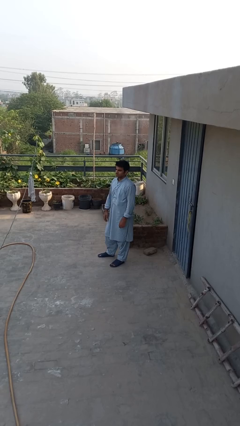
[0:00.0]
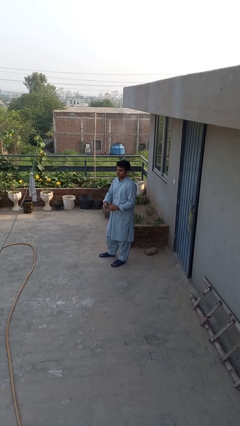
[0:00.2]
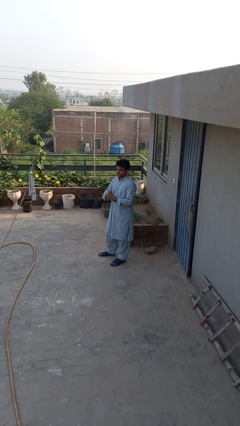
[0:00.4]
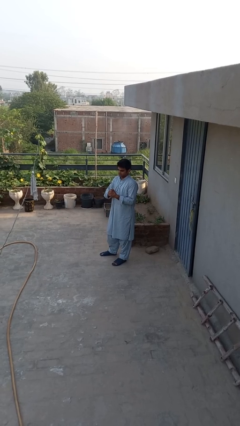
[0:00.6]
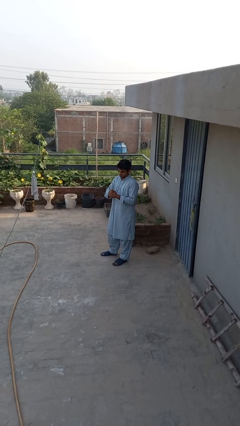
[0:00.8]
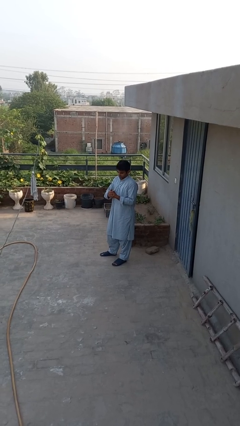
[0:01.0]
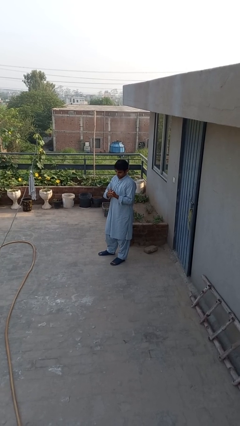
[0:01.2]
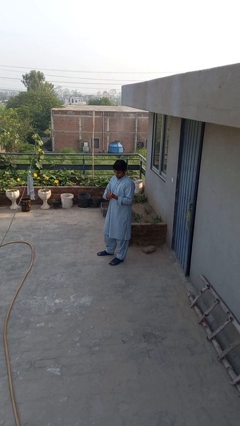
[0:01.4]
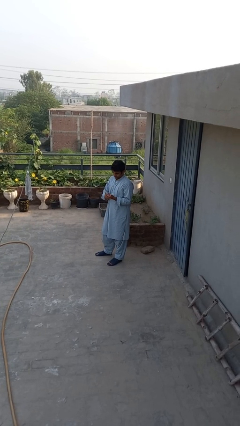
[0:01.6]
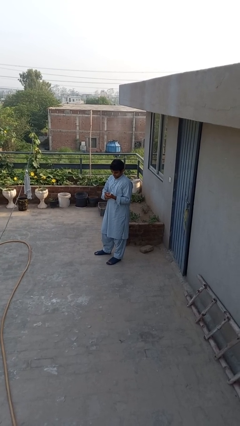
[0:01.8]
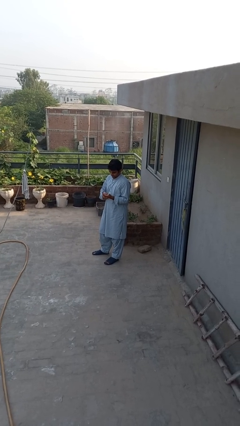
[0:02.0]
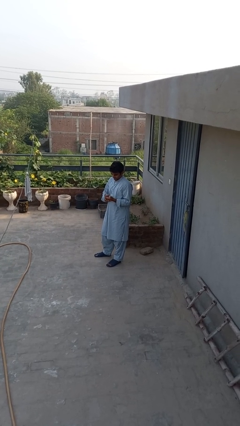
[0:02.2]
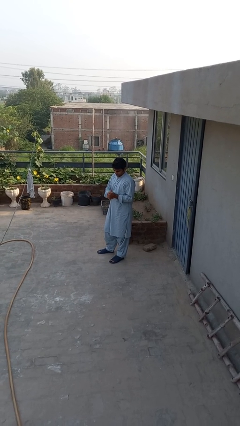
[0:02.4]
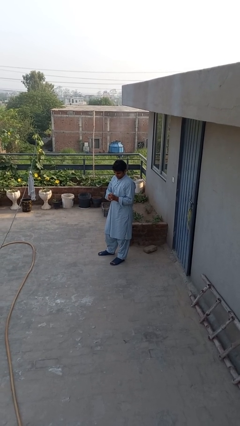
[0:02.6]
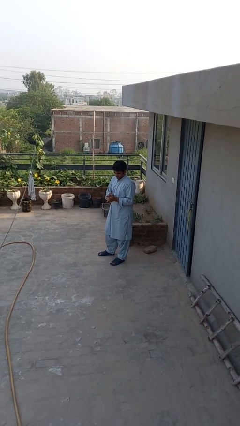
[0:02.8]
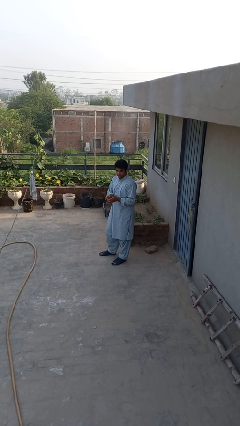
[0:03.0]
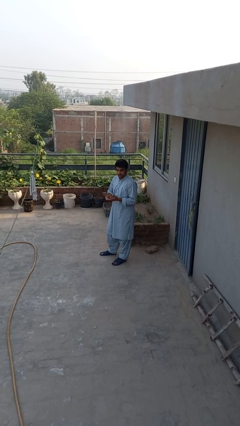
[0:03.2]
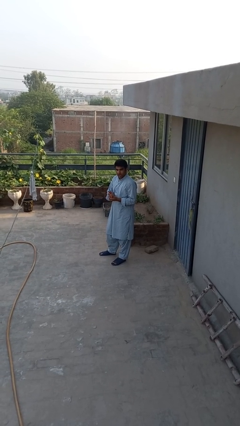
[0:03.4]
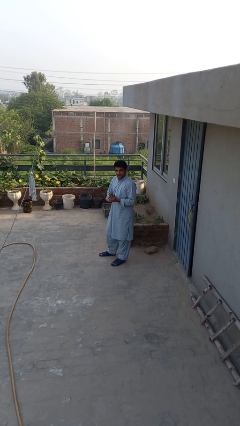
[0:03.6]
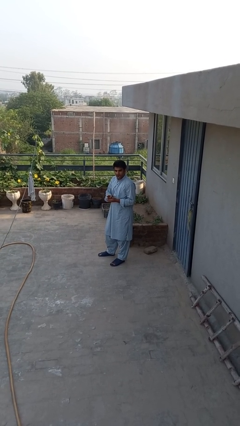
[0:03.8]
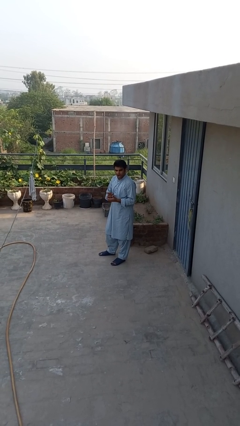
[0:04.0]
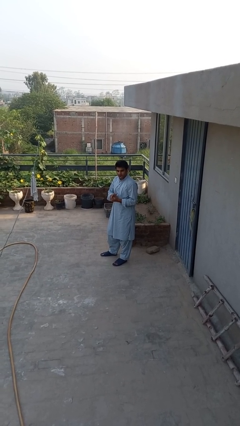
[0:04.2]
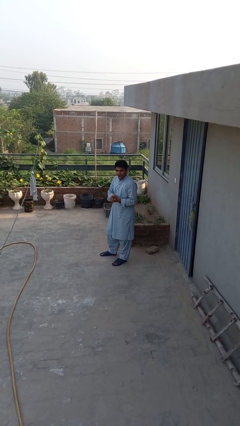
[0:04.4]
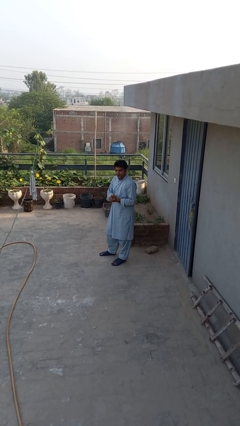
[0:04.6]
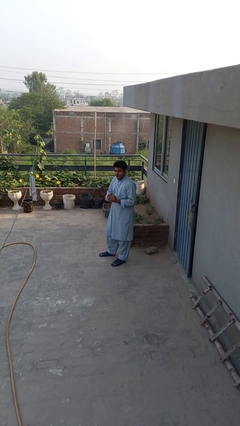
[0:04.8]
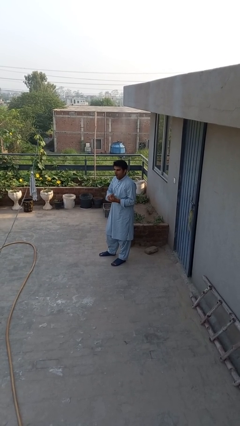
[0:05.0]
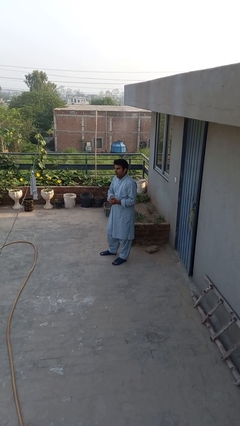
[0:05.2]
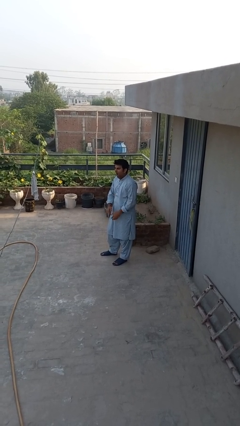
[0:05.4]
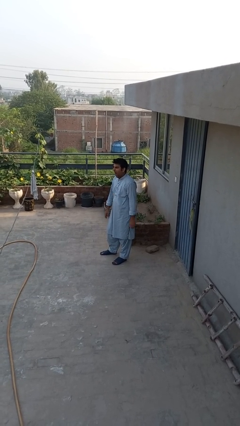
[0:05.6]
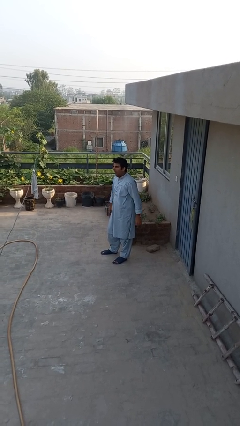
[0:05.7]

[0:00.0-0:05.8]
person cracks knuckles

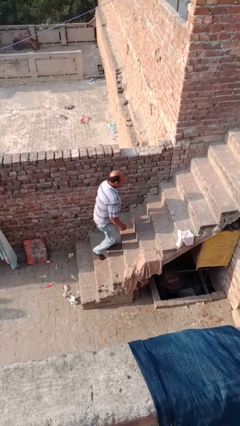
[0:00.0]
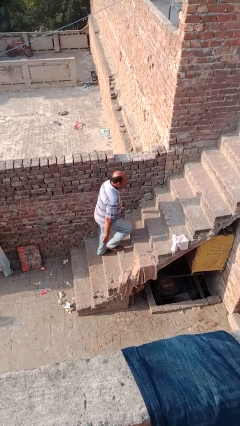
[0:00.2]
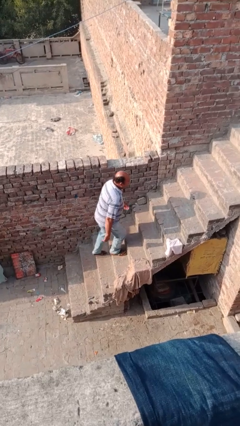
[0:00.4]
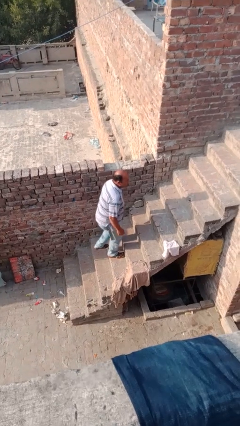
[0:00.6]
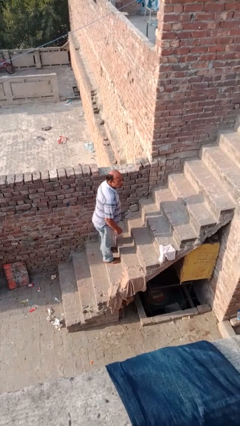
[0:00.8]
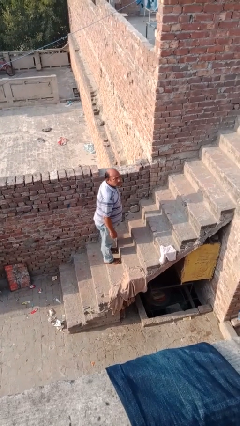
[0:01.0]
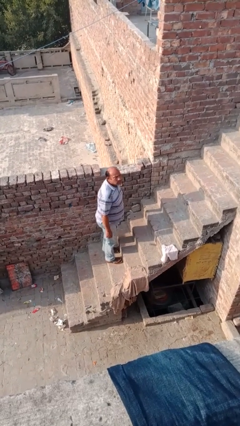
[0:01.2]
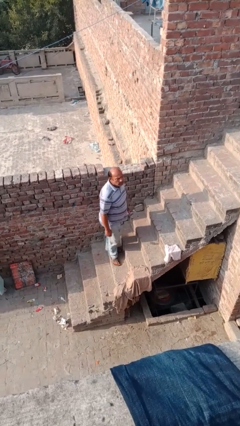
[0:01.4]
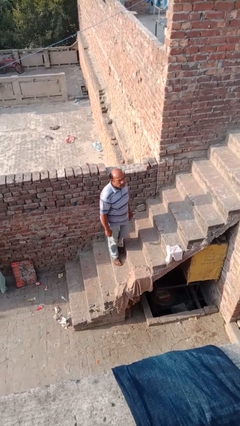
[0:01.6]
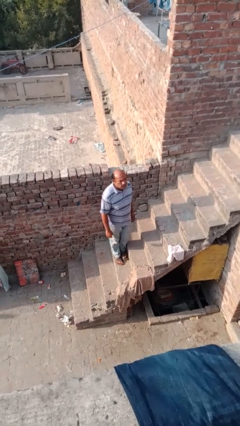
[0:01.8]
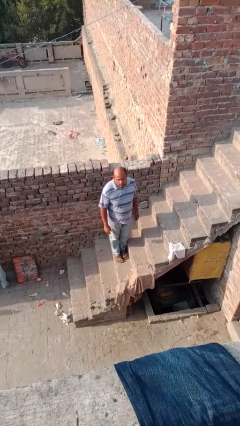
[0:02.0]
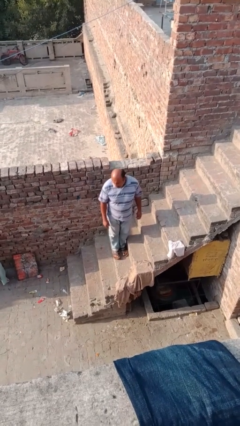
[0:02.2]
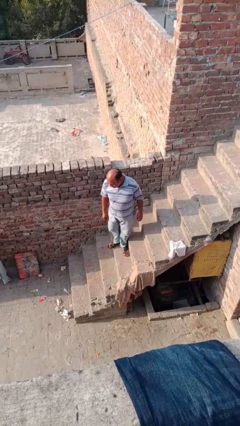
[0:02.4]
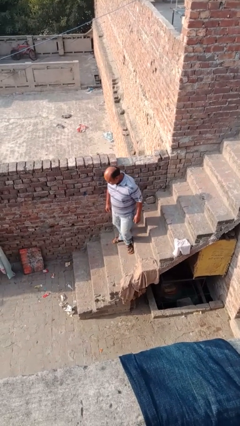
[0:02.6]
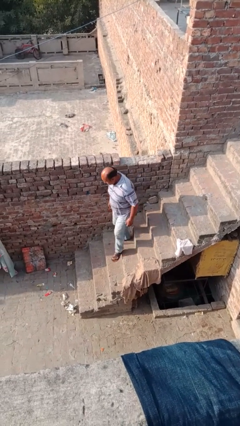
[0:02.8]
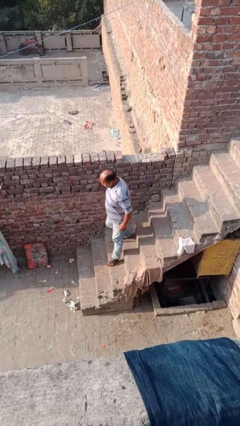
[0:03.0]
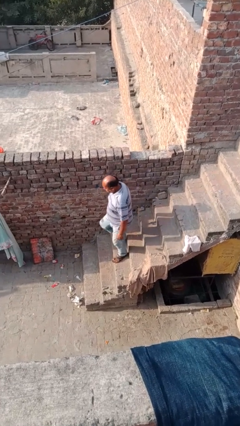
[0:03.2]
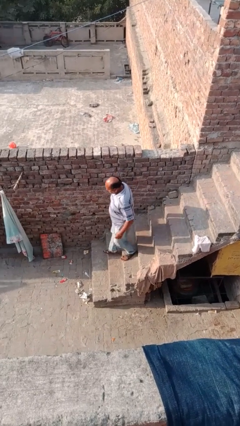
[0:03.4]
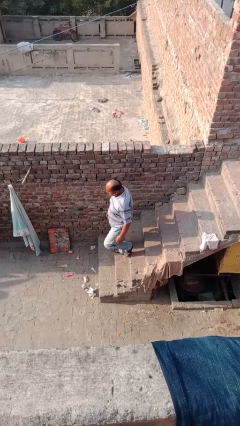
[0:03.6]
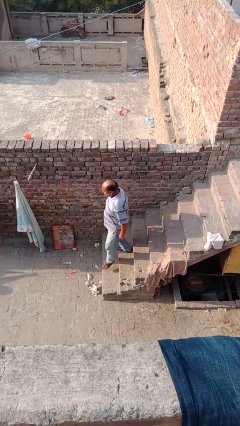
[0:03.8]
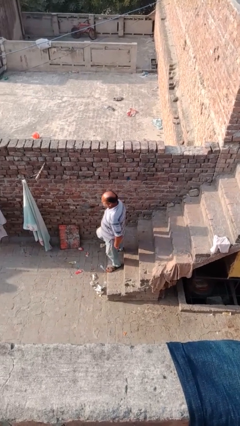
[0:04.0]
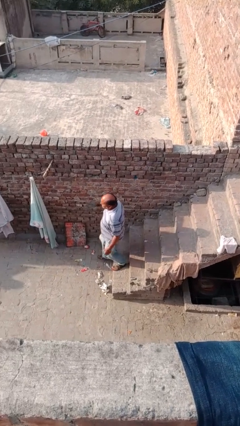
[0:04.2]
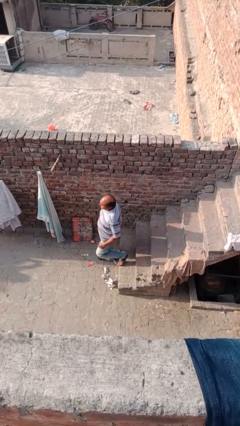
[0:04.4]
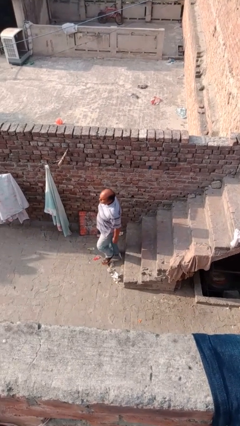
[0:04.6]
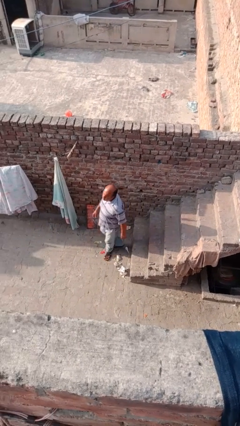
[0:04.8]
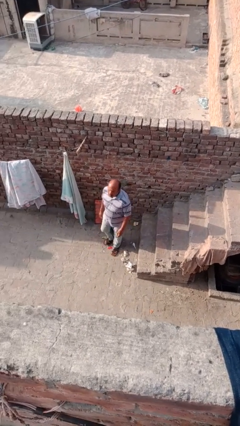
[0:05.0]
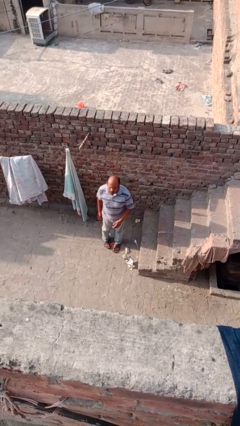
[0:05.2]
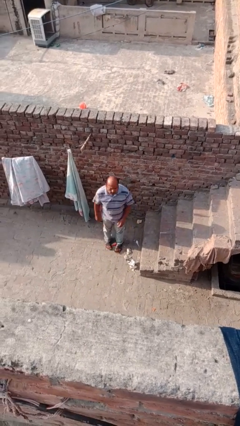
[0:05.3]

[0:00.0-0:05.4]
person climbs down stairs

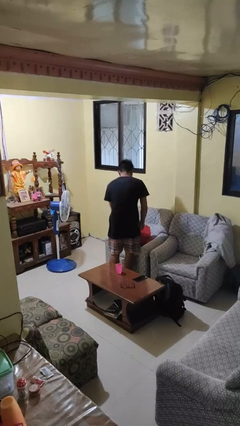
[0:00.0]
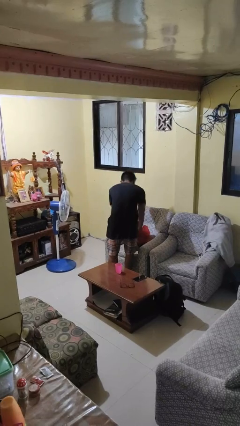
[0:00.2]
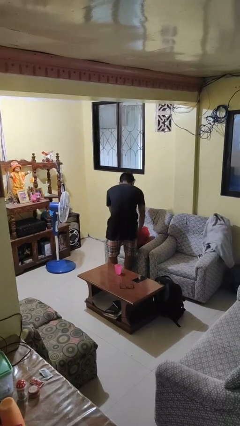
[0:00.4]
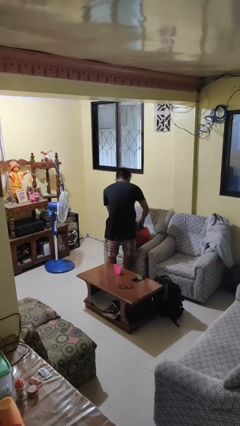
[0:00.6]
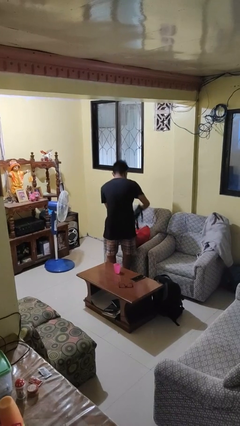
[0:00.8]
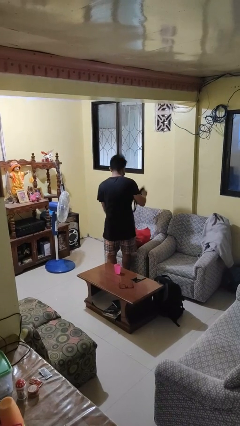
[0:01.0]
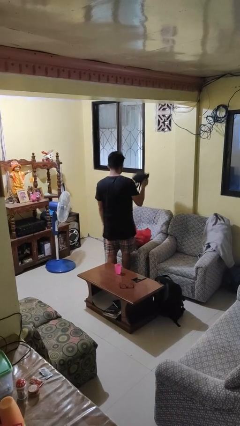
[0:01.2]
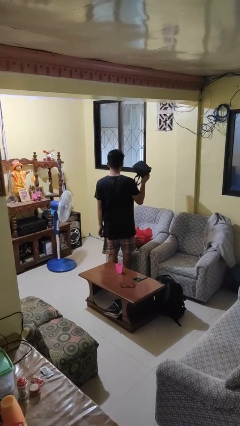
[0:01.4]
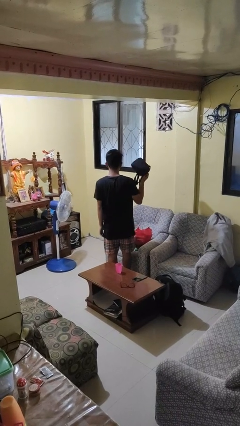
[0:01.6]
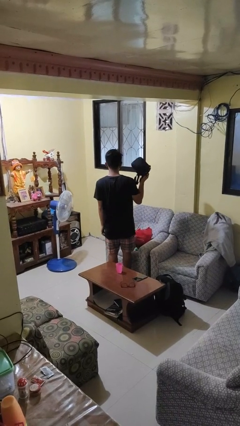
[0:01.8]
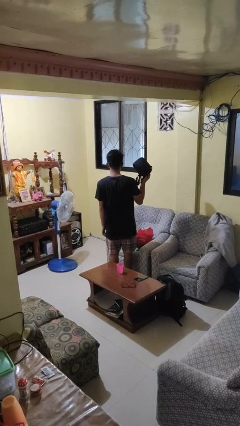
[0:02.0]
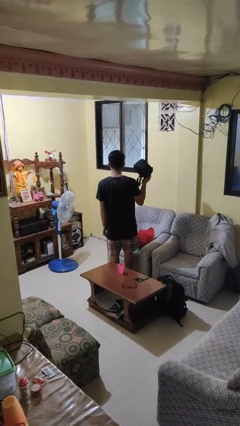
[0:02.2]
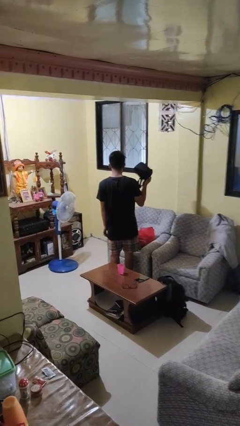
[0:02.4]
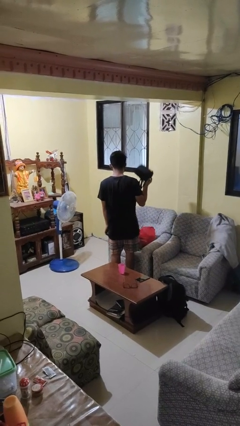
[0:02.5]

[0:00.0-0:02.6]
person takes object from bag

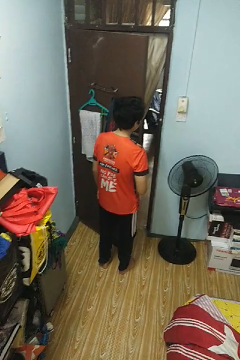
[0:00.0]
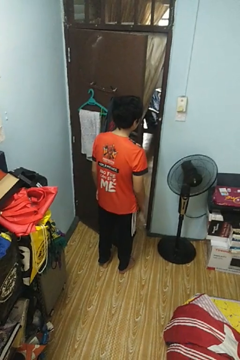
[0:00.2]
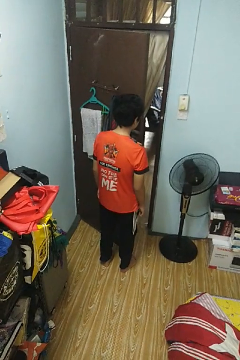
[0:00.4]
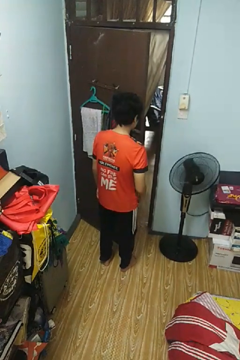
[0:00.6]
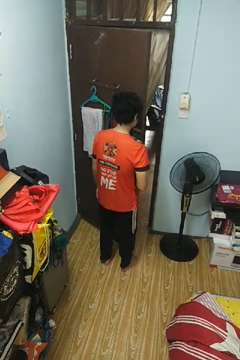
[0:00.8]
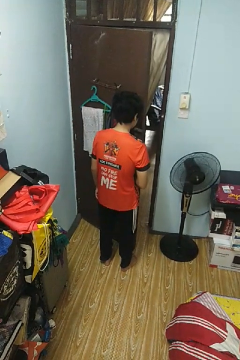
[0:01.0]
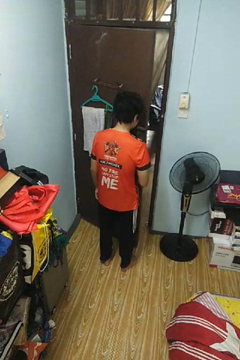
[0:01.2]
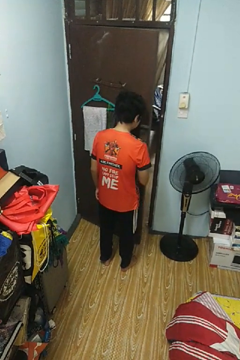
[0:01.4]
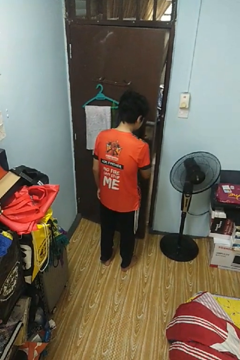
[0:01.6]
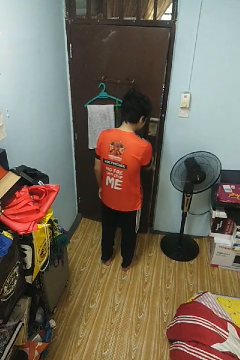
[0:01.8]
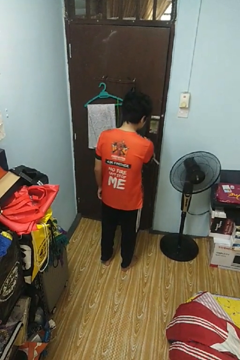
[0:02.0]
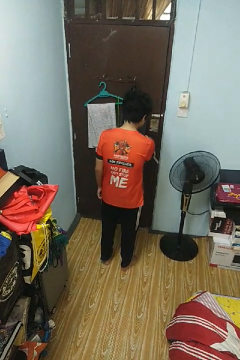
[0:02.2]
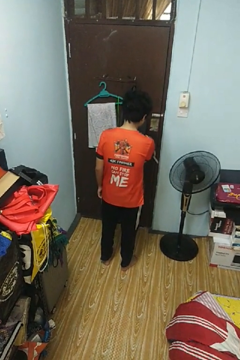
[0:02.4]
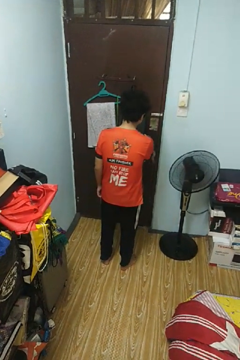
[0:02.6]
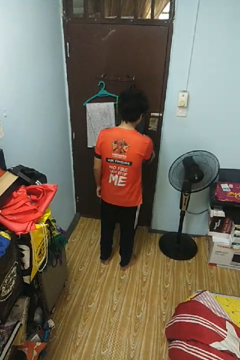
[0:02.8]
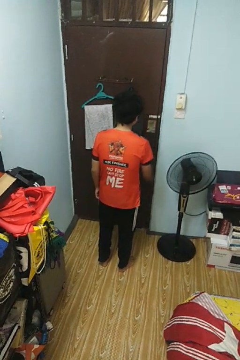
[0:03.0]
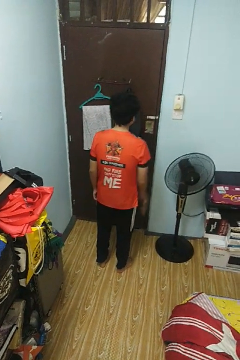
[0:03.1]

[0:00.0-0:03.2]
person closes facility door

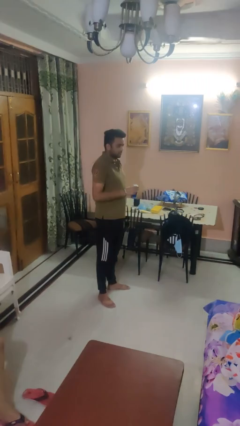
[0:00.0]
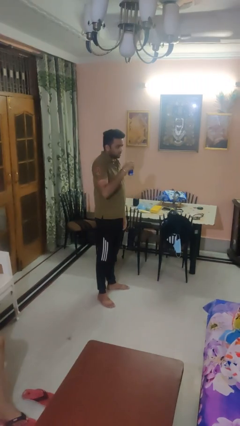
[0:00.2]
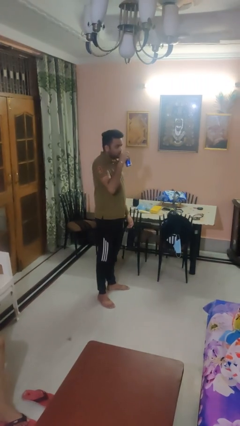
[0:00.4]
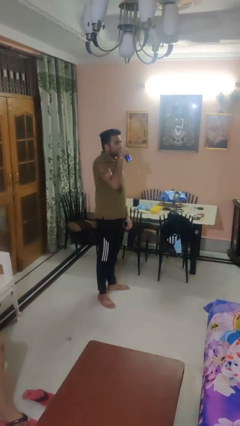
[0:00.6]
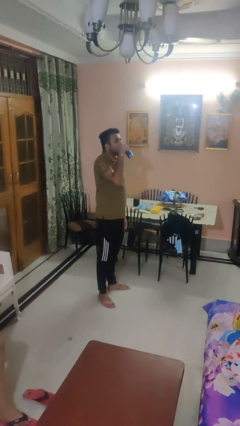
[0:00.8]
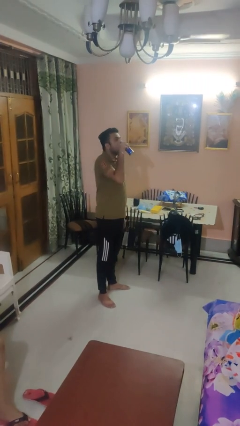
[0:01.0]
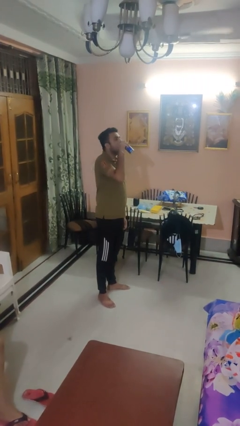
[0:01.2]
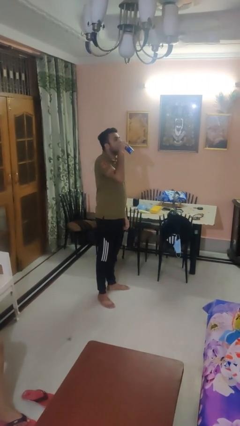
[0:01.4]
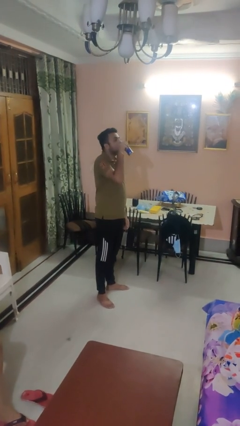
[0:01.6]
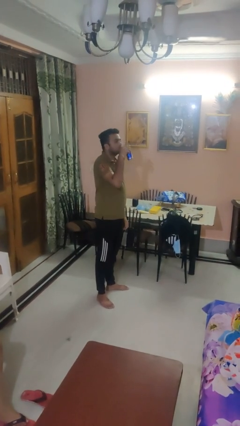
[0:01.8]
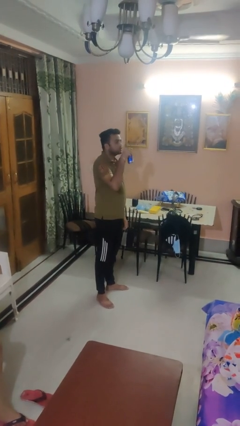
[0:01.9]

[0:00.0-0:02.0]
person drinks from beverage can
